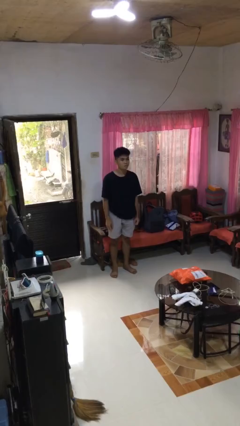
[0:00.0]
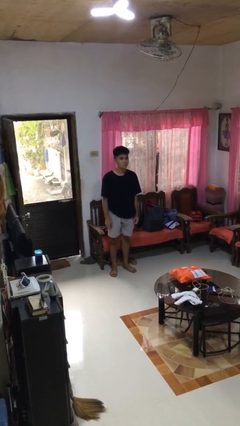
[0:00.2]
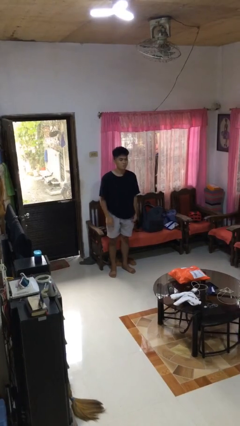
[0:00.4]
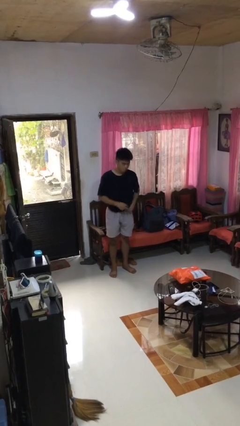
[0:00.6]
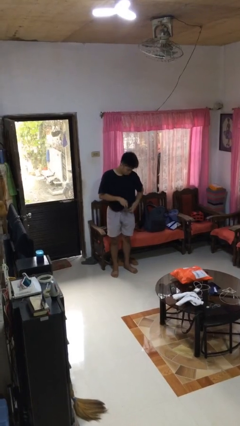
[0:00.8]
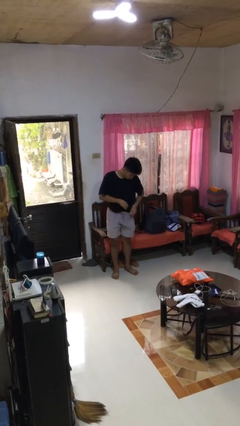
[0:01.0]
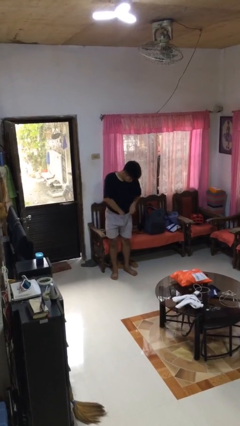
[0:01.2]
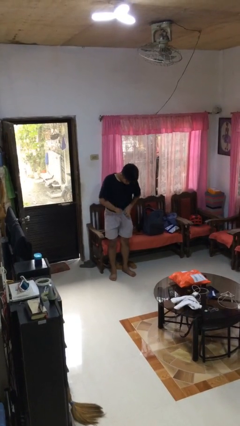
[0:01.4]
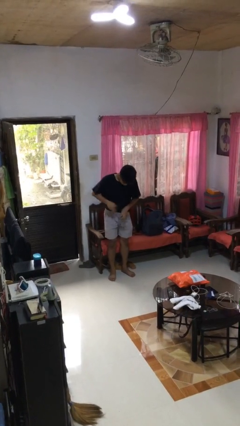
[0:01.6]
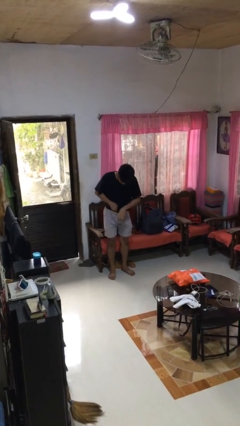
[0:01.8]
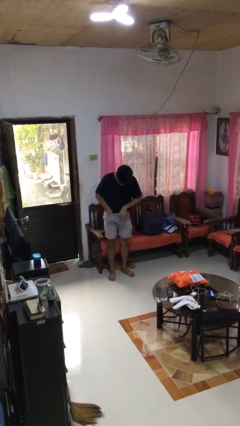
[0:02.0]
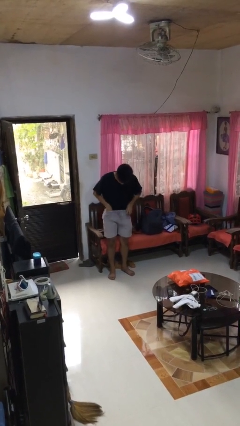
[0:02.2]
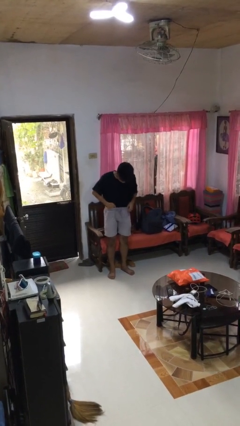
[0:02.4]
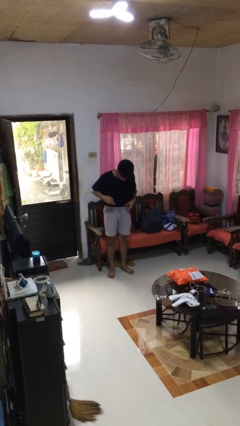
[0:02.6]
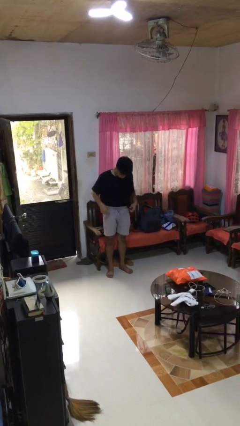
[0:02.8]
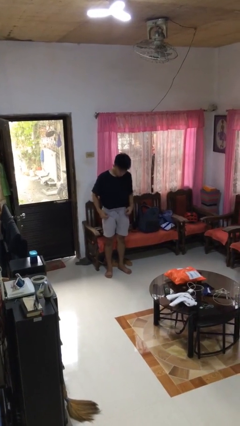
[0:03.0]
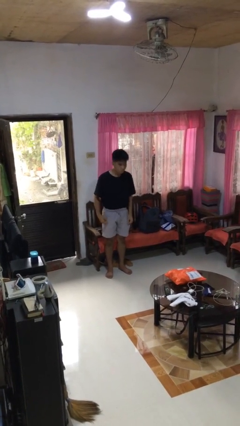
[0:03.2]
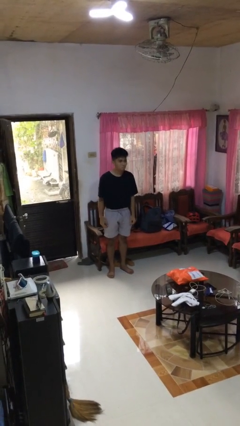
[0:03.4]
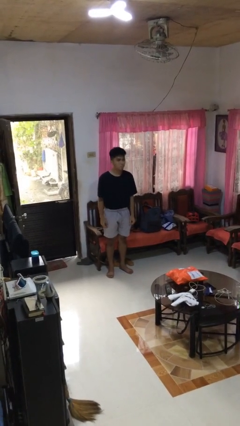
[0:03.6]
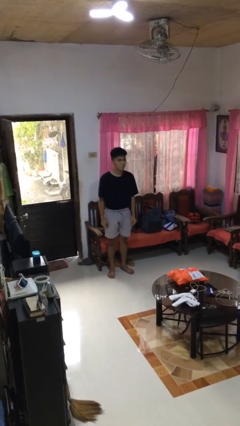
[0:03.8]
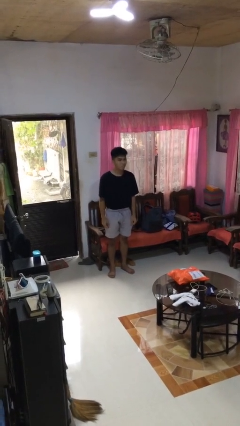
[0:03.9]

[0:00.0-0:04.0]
person tucks in shirt

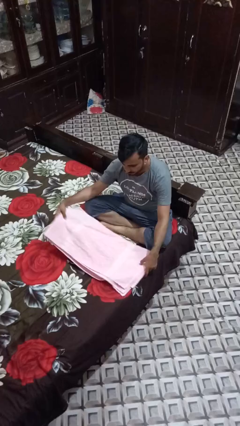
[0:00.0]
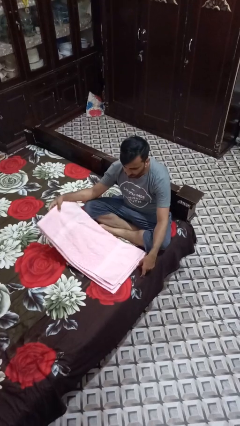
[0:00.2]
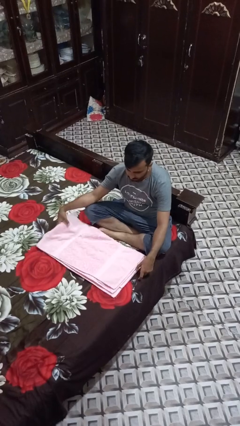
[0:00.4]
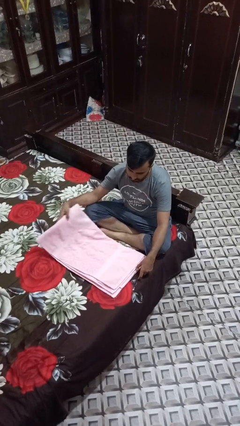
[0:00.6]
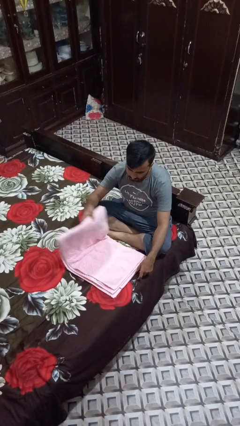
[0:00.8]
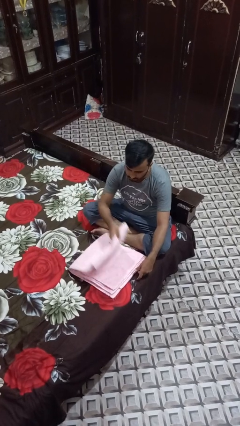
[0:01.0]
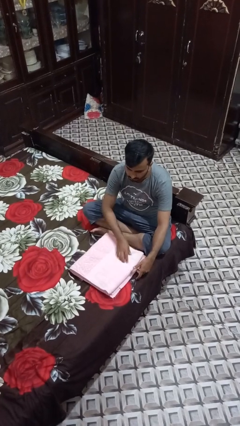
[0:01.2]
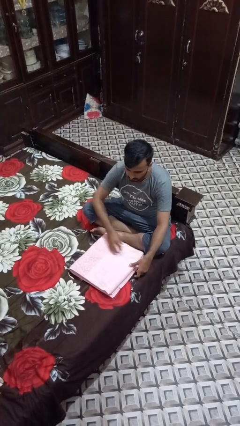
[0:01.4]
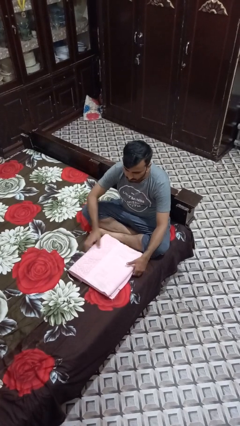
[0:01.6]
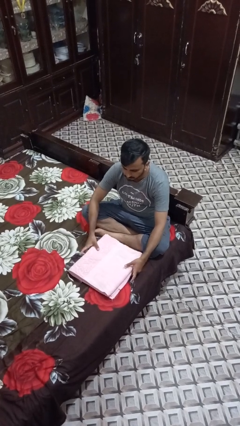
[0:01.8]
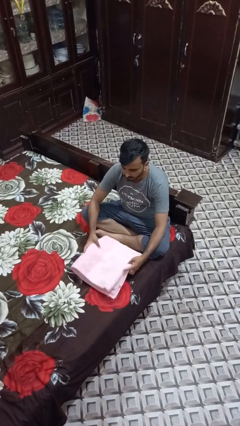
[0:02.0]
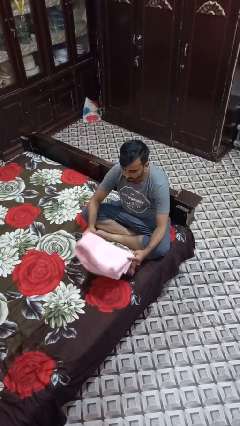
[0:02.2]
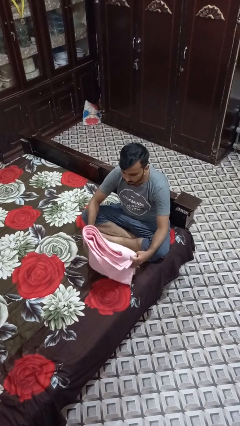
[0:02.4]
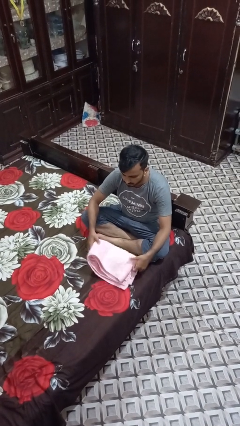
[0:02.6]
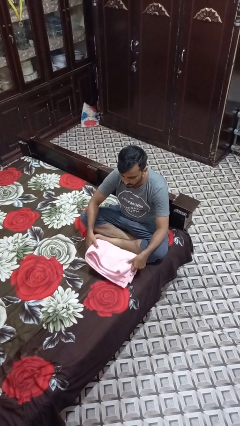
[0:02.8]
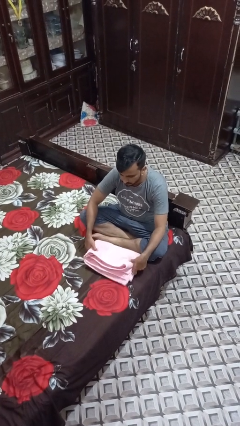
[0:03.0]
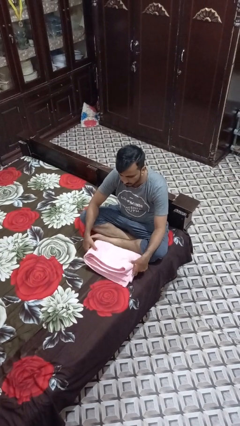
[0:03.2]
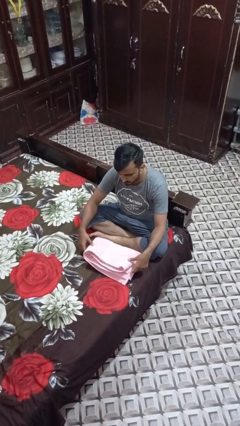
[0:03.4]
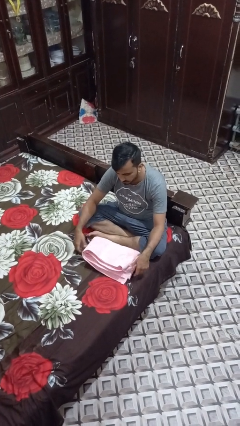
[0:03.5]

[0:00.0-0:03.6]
person folds towel

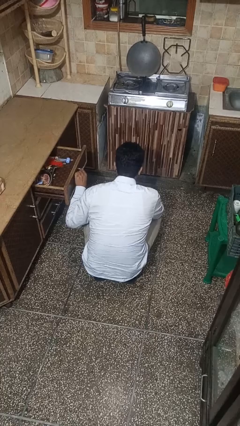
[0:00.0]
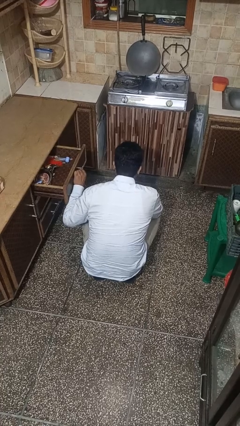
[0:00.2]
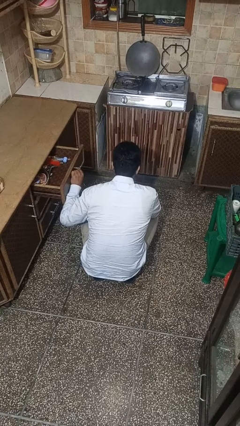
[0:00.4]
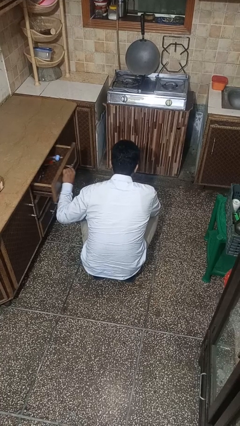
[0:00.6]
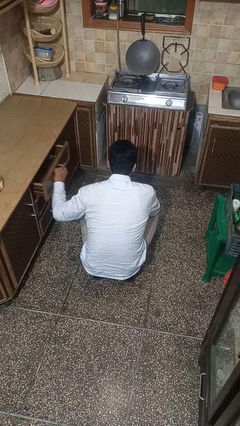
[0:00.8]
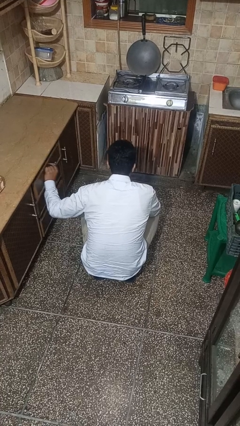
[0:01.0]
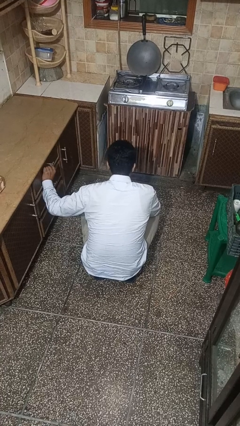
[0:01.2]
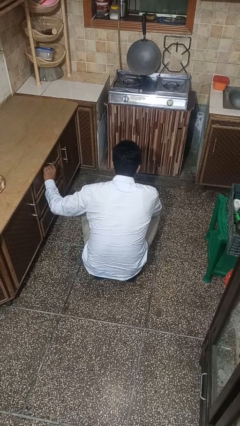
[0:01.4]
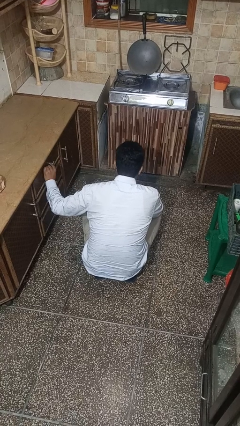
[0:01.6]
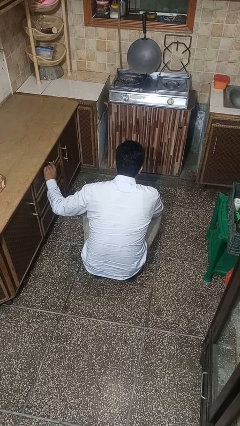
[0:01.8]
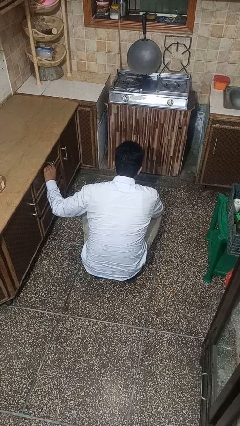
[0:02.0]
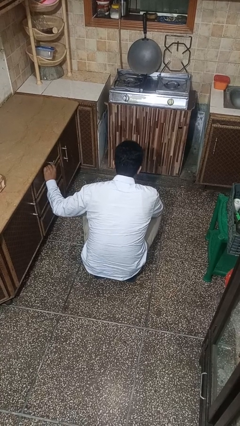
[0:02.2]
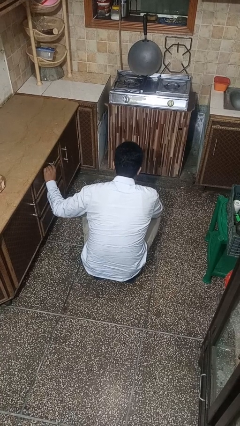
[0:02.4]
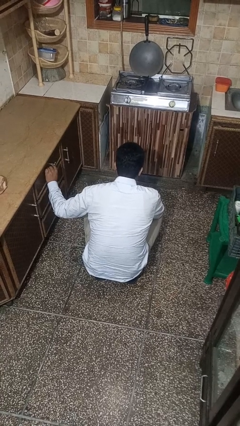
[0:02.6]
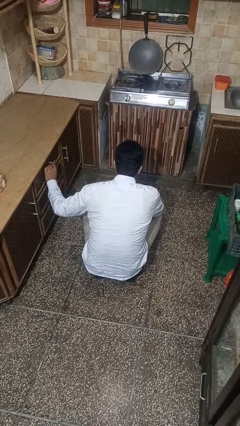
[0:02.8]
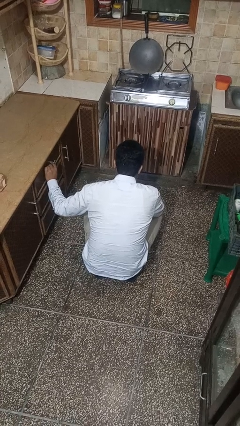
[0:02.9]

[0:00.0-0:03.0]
person closes kitchen drawer

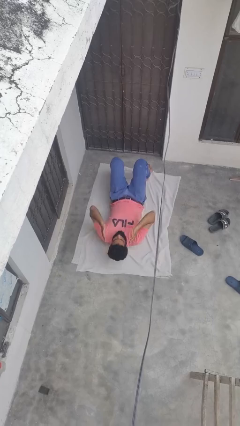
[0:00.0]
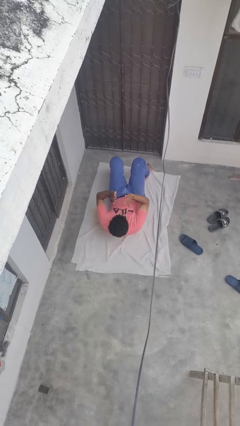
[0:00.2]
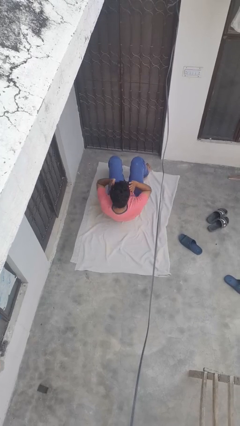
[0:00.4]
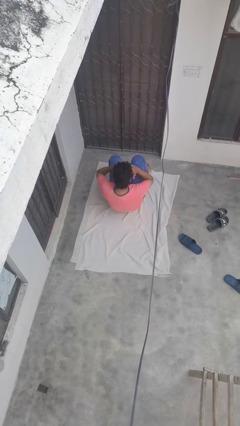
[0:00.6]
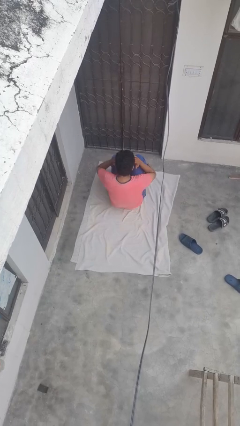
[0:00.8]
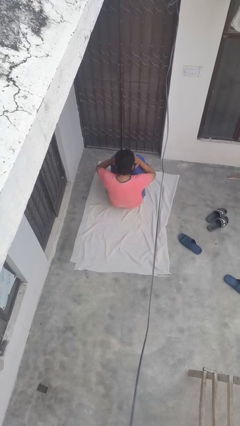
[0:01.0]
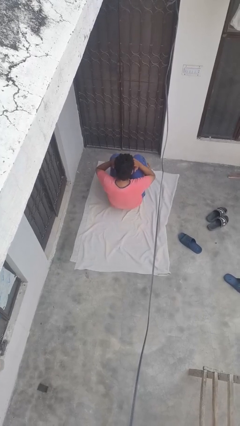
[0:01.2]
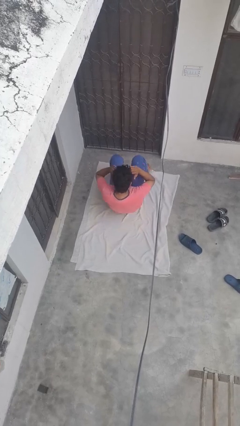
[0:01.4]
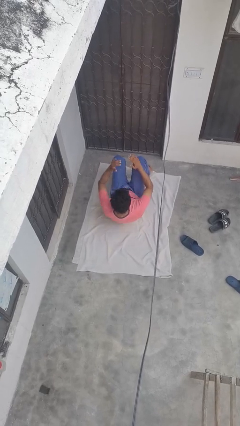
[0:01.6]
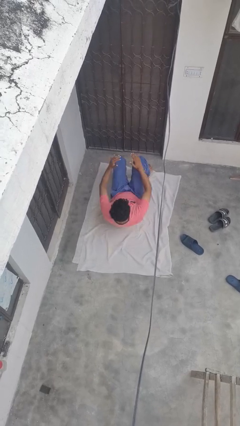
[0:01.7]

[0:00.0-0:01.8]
person exercises with situp

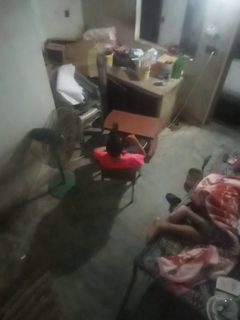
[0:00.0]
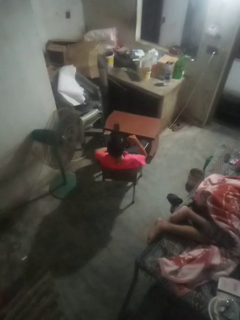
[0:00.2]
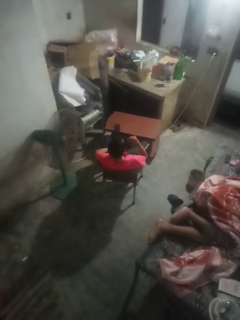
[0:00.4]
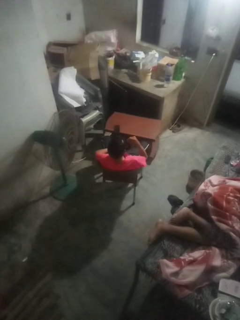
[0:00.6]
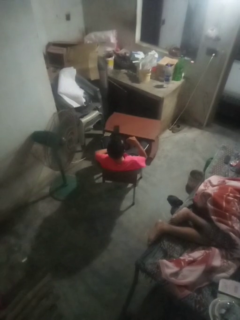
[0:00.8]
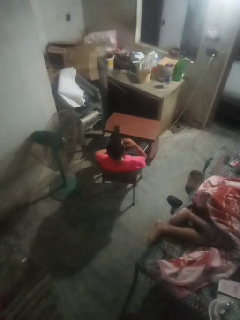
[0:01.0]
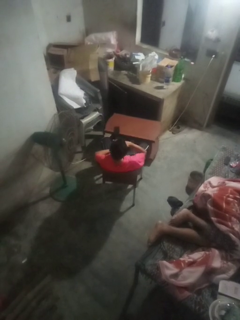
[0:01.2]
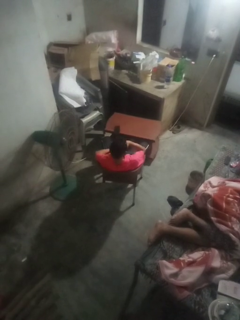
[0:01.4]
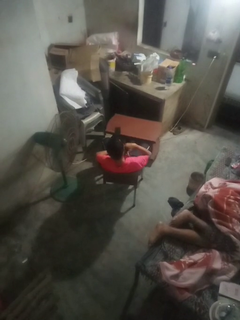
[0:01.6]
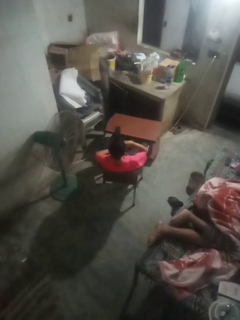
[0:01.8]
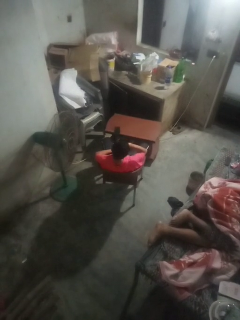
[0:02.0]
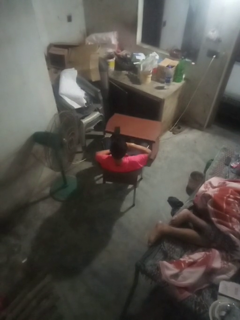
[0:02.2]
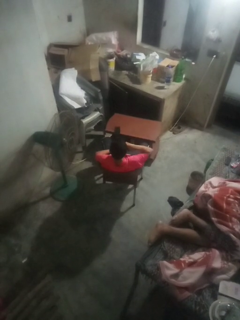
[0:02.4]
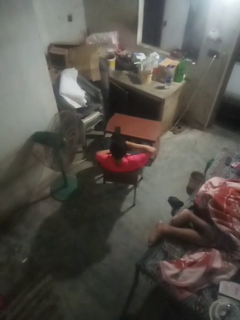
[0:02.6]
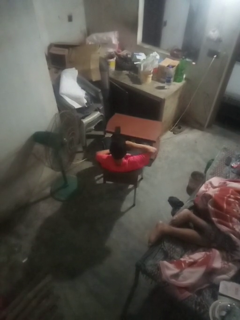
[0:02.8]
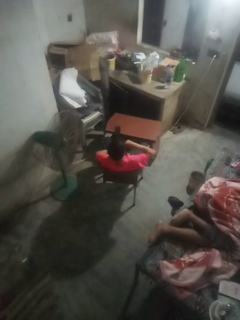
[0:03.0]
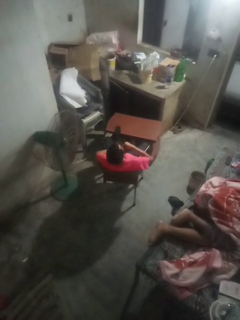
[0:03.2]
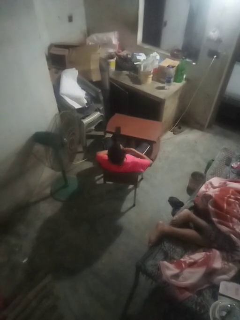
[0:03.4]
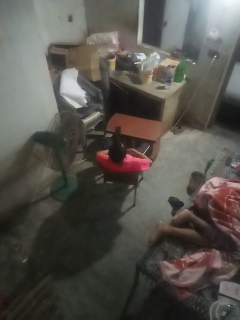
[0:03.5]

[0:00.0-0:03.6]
person licks fingers

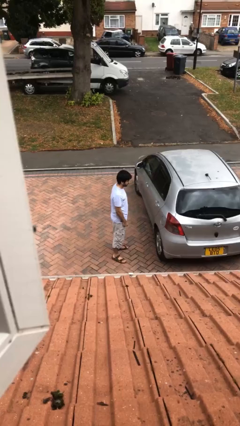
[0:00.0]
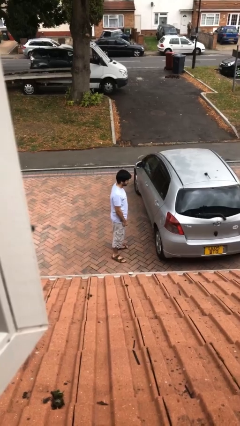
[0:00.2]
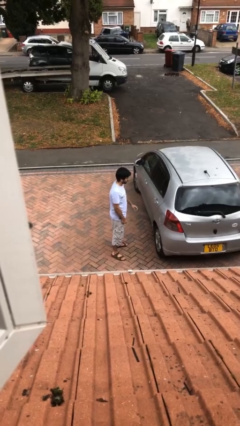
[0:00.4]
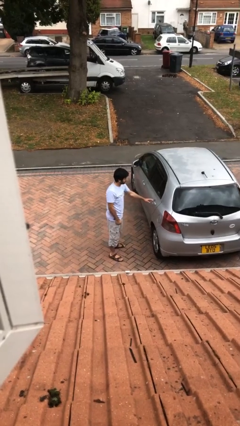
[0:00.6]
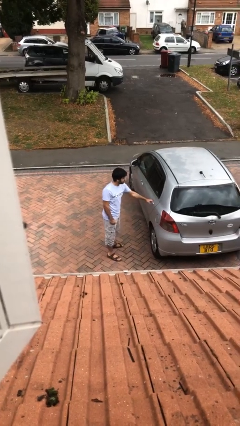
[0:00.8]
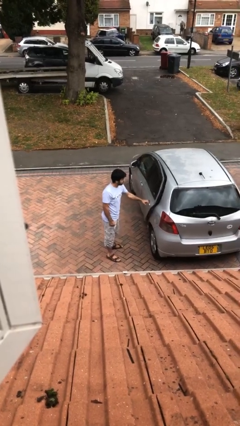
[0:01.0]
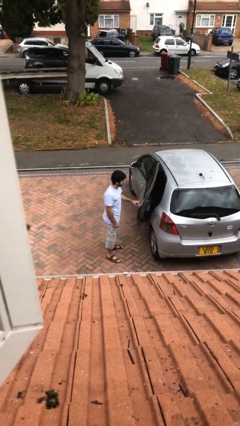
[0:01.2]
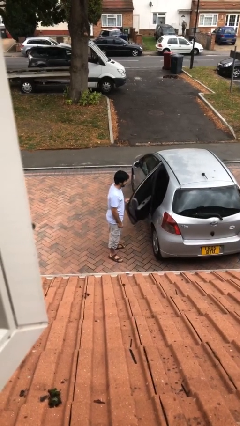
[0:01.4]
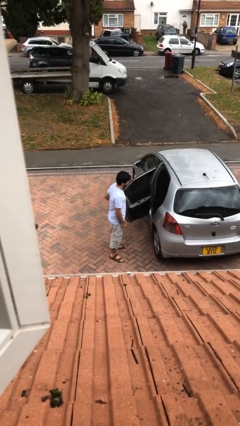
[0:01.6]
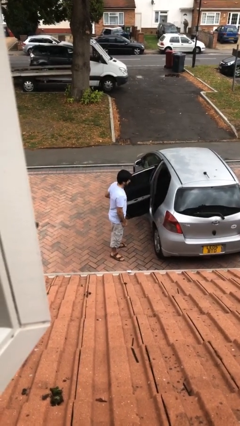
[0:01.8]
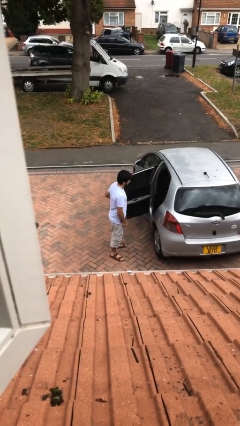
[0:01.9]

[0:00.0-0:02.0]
person opens car door

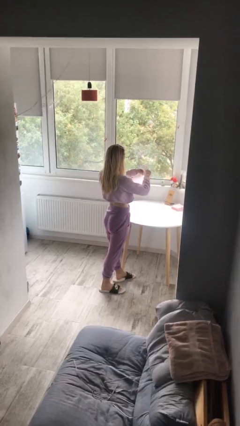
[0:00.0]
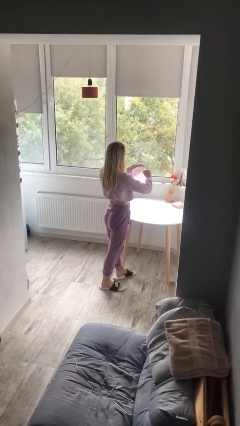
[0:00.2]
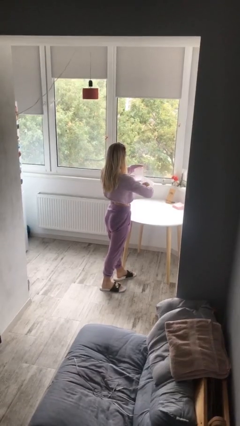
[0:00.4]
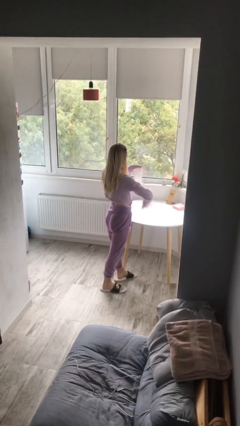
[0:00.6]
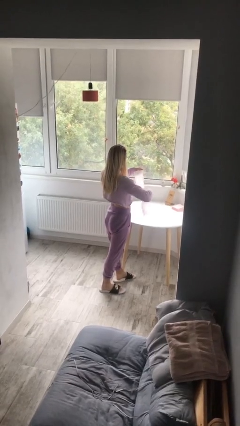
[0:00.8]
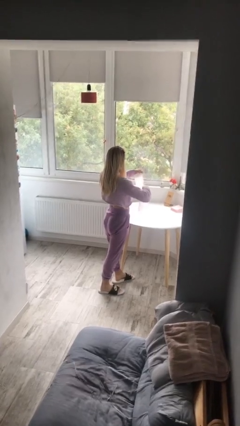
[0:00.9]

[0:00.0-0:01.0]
person tears paper
